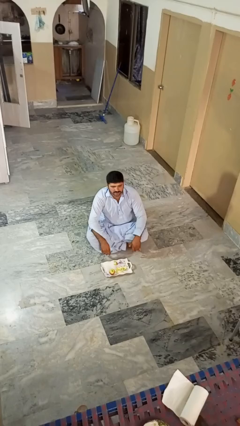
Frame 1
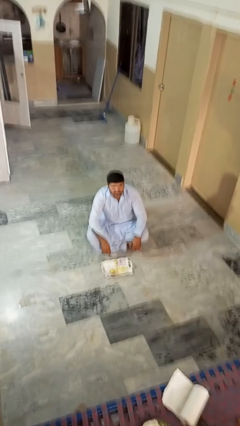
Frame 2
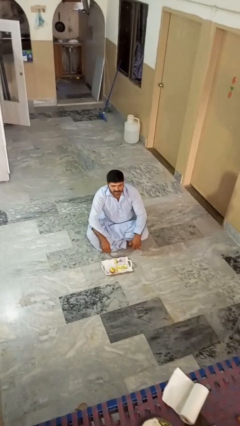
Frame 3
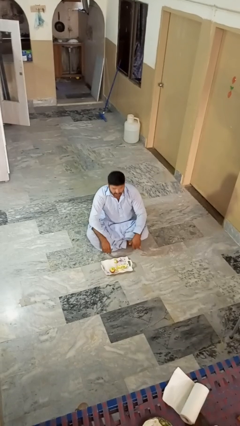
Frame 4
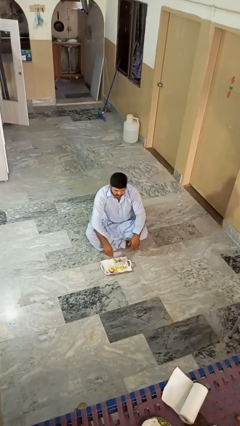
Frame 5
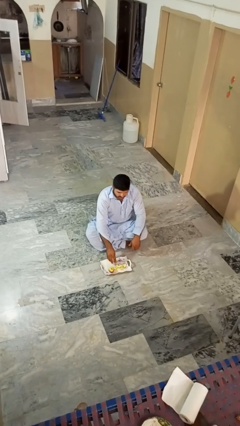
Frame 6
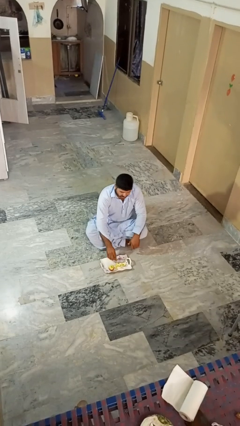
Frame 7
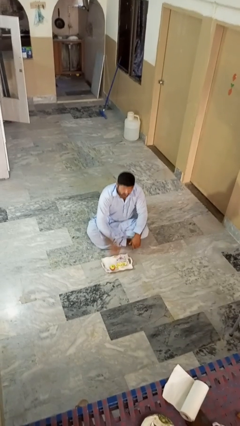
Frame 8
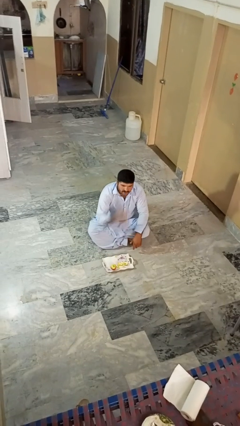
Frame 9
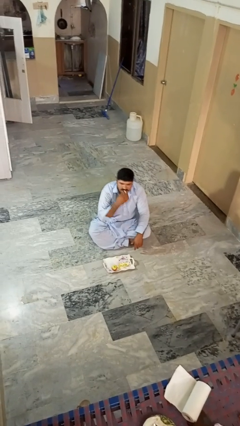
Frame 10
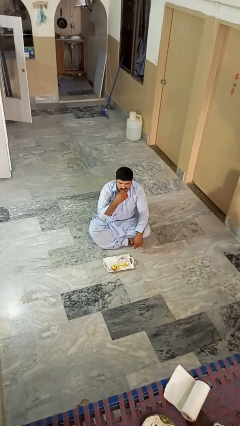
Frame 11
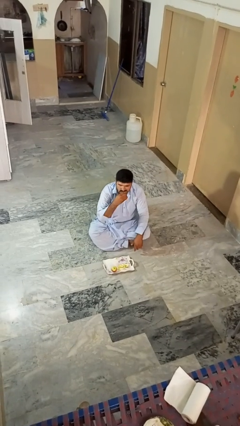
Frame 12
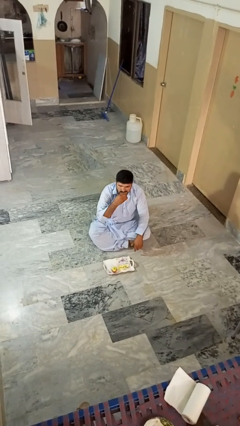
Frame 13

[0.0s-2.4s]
person eats apple

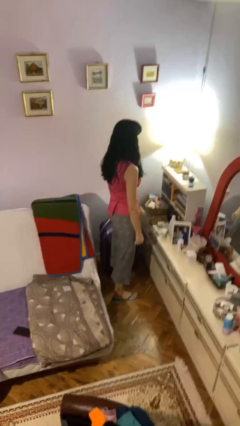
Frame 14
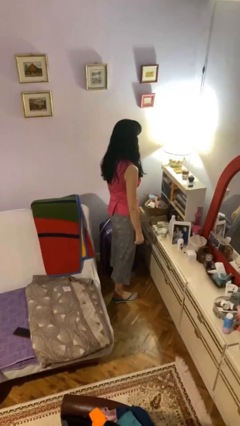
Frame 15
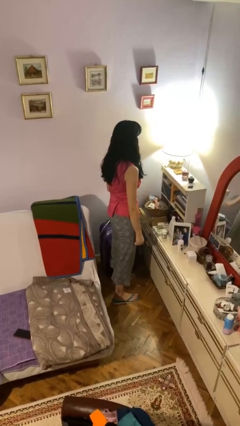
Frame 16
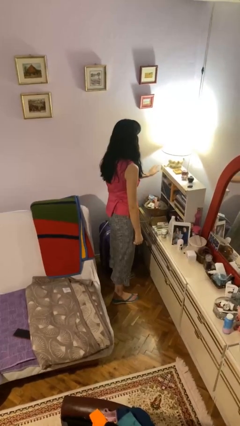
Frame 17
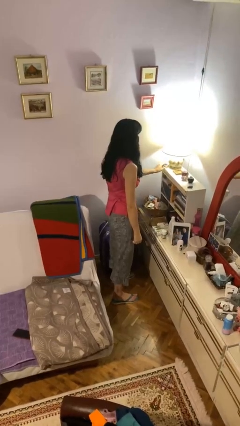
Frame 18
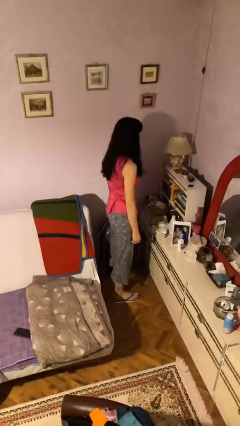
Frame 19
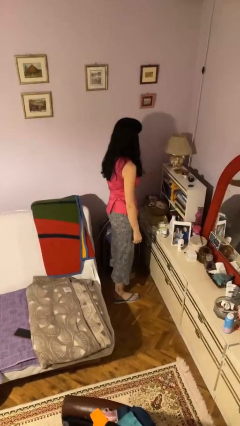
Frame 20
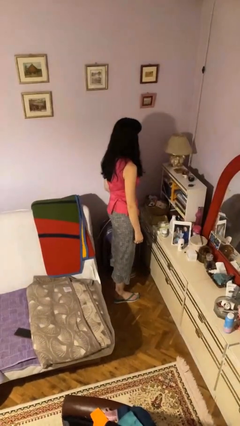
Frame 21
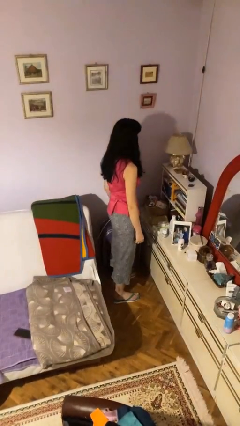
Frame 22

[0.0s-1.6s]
person turns off lamp

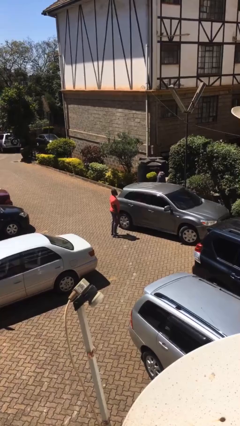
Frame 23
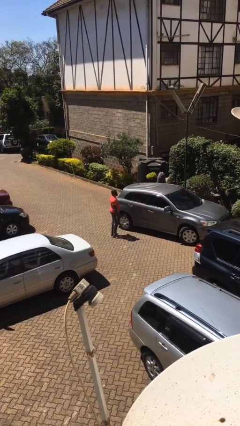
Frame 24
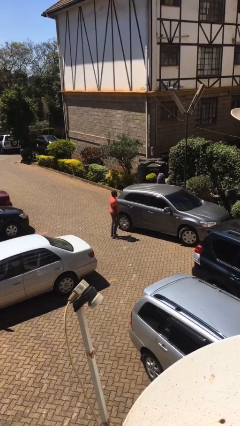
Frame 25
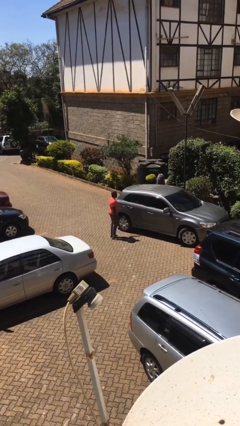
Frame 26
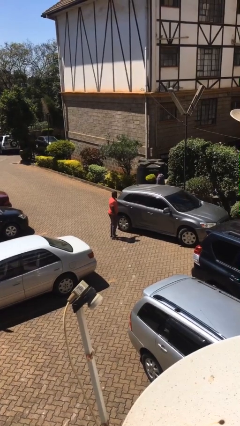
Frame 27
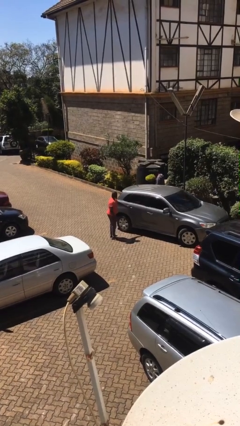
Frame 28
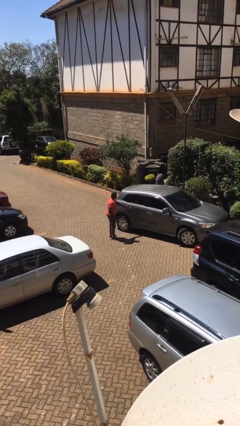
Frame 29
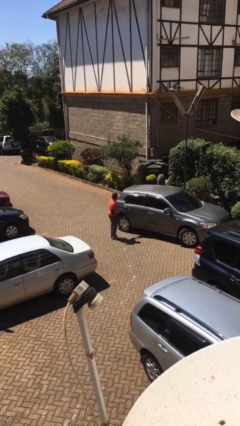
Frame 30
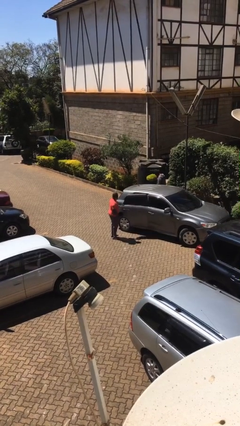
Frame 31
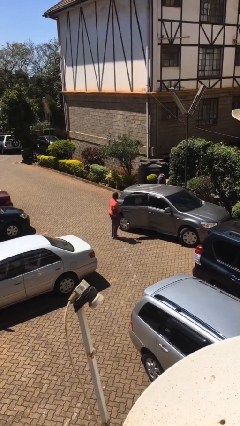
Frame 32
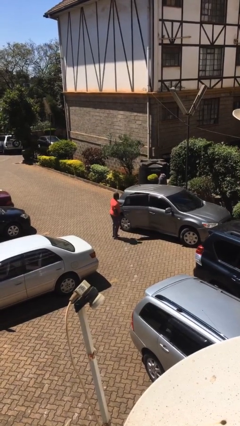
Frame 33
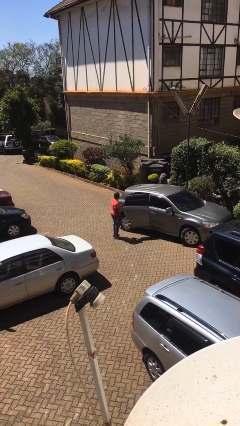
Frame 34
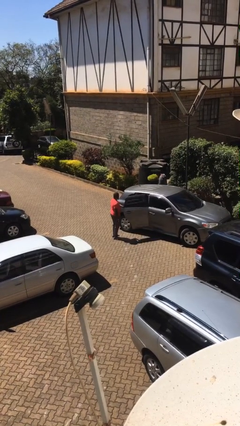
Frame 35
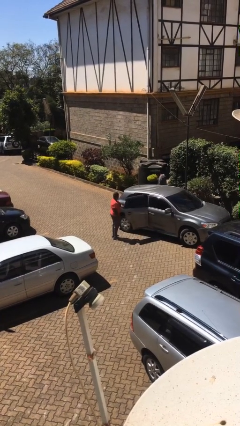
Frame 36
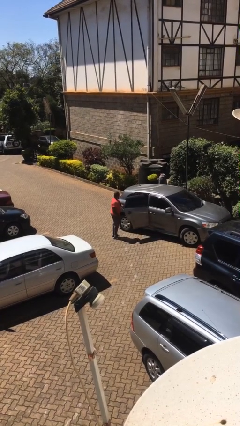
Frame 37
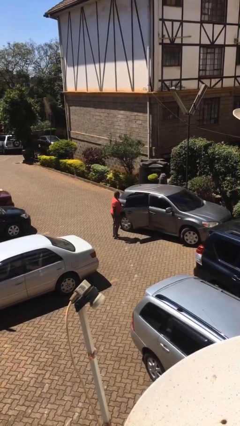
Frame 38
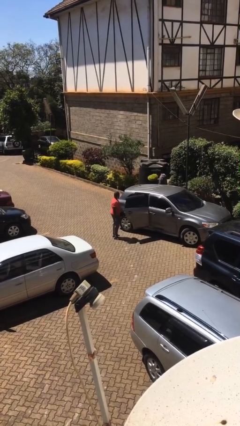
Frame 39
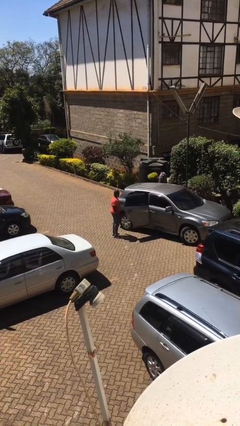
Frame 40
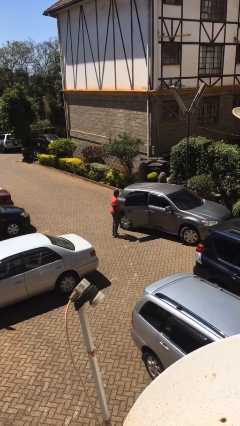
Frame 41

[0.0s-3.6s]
person opens car door

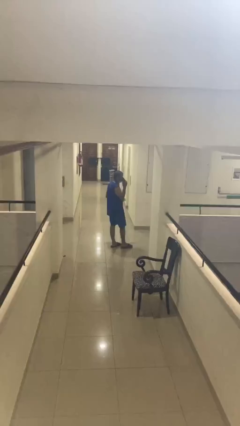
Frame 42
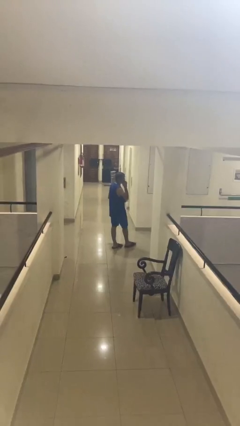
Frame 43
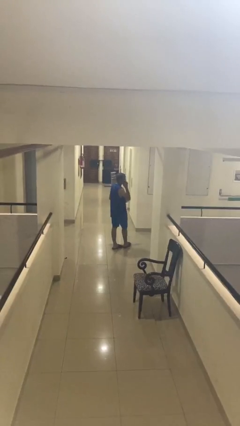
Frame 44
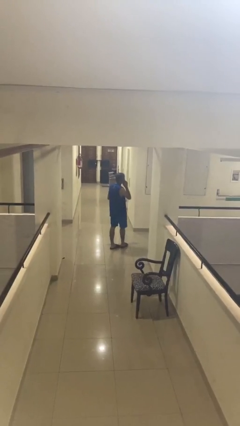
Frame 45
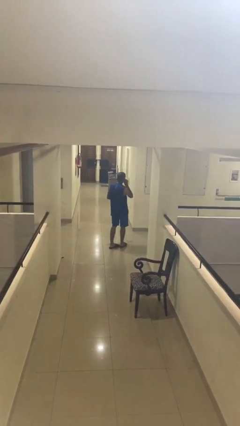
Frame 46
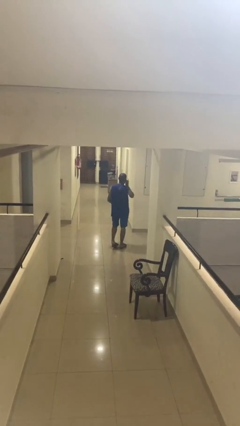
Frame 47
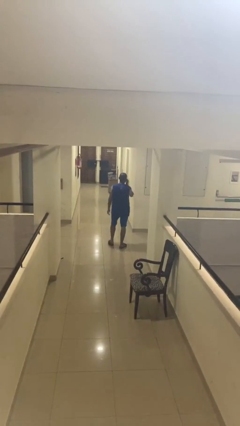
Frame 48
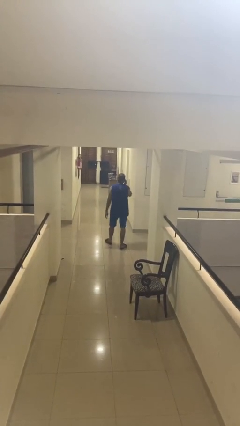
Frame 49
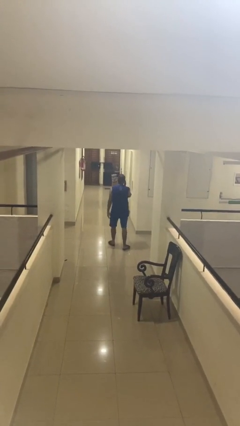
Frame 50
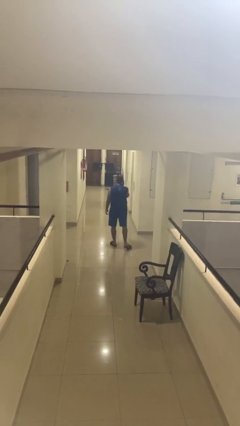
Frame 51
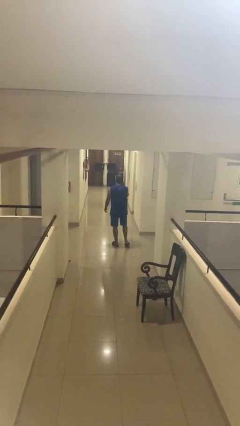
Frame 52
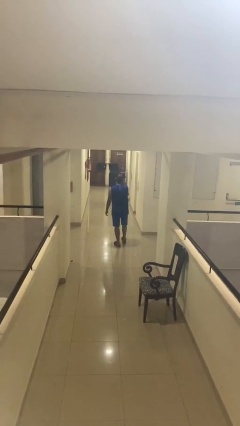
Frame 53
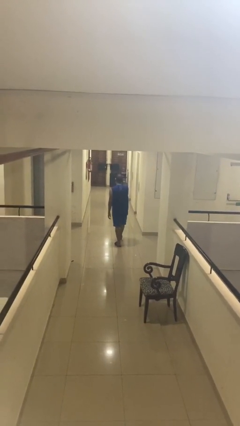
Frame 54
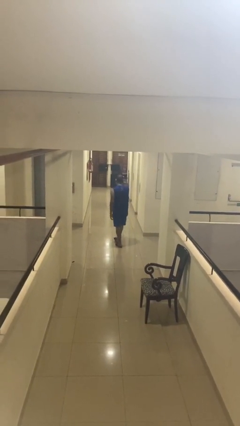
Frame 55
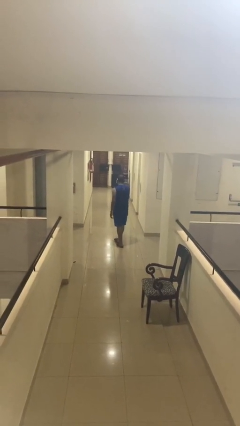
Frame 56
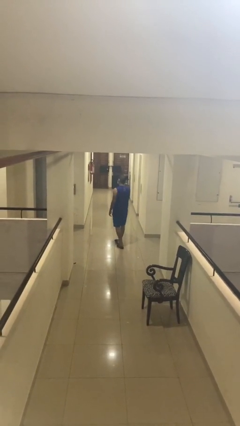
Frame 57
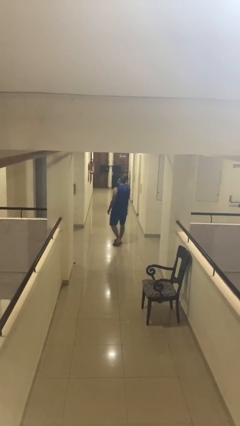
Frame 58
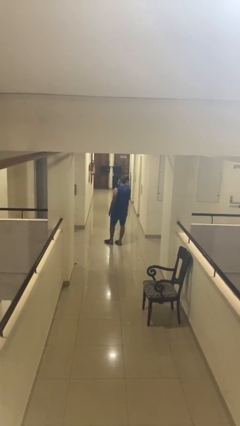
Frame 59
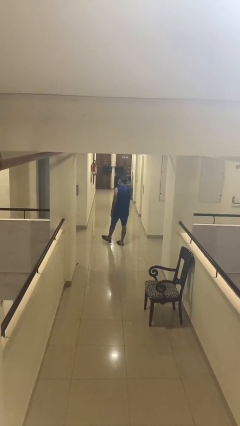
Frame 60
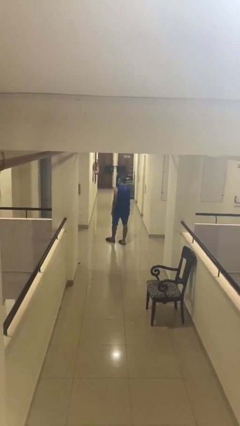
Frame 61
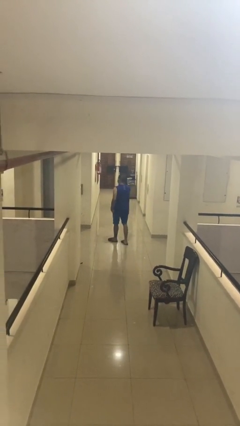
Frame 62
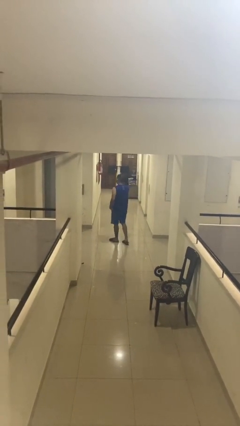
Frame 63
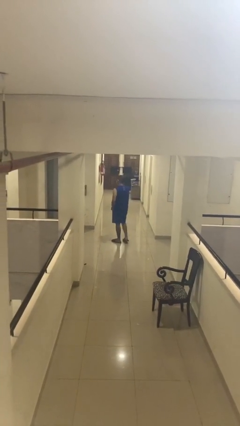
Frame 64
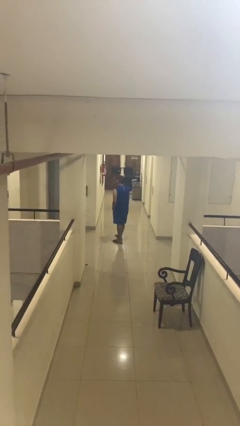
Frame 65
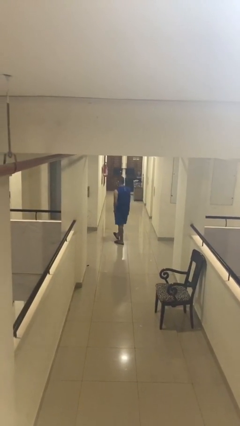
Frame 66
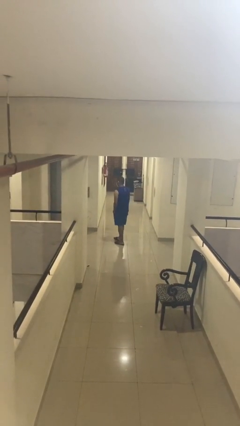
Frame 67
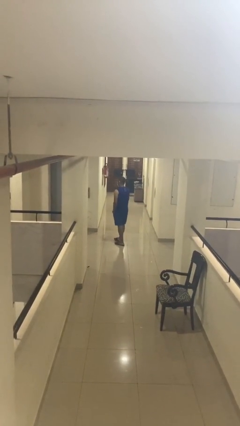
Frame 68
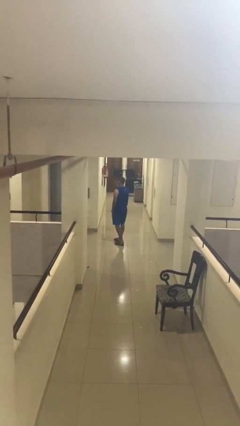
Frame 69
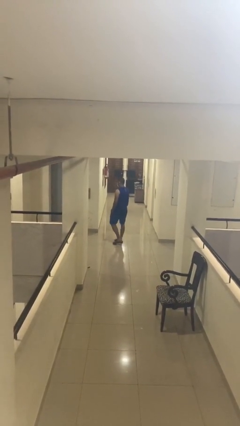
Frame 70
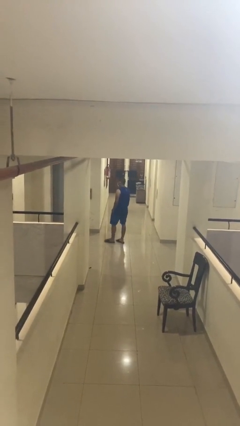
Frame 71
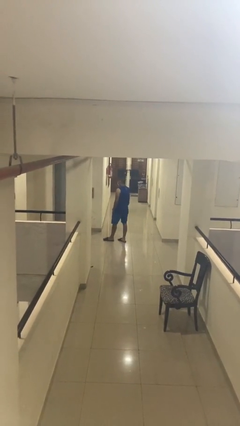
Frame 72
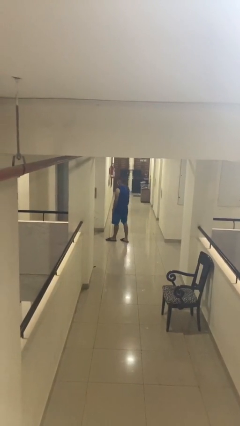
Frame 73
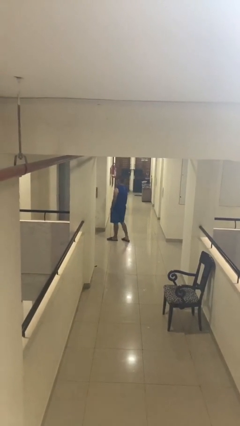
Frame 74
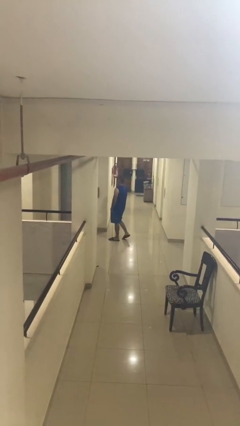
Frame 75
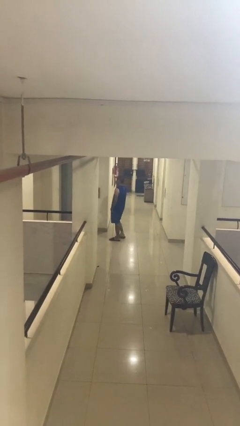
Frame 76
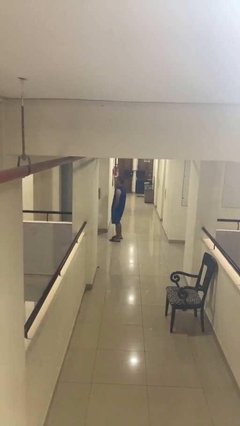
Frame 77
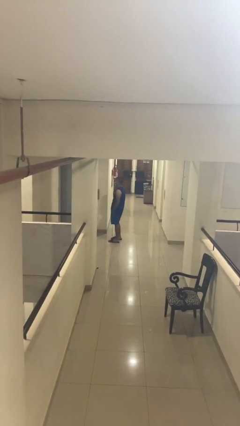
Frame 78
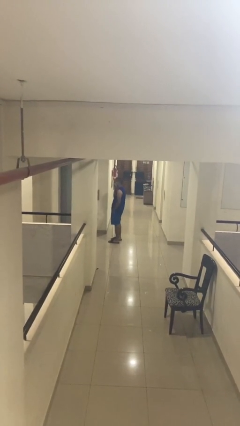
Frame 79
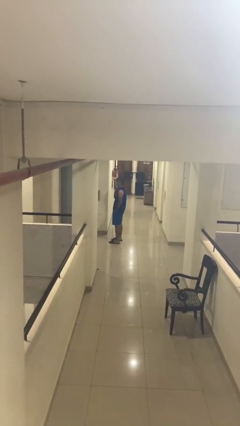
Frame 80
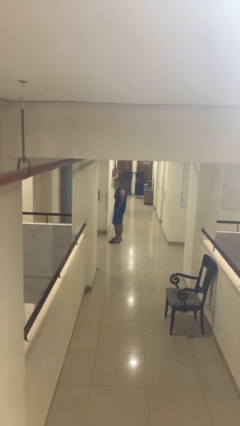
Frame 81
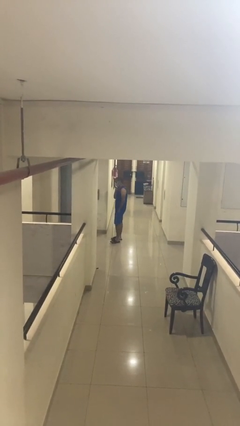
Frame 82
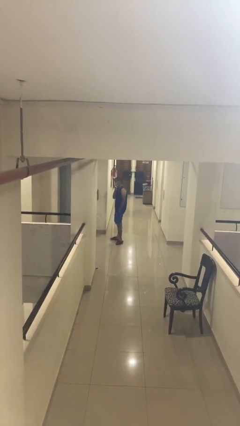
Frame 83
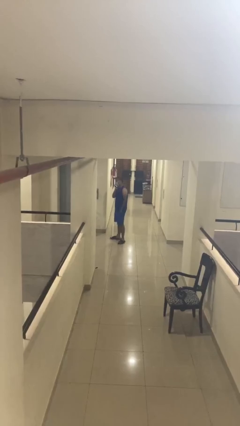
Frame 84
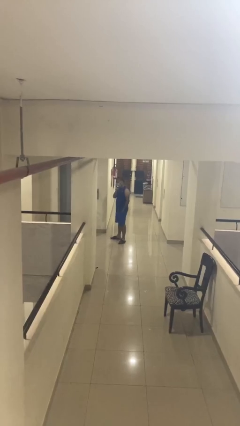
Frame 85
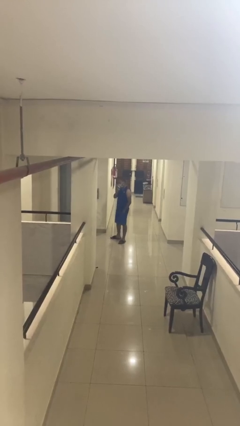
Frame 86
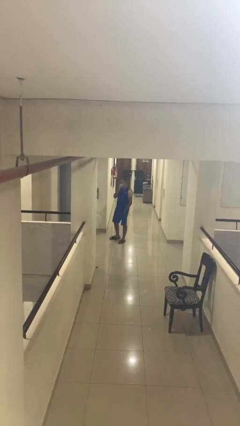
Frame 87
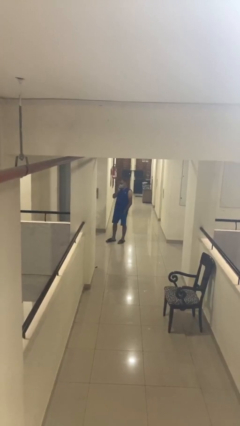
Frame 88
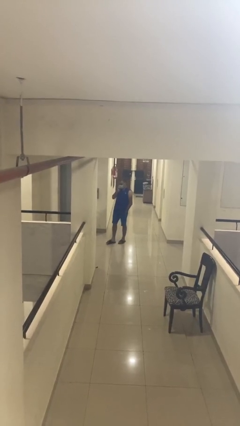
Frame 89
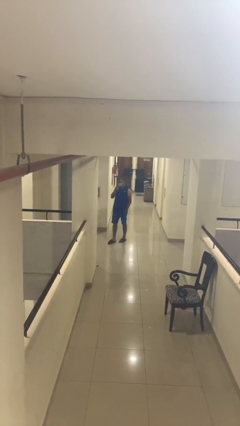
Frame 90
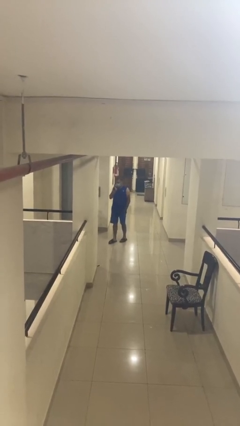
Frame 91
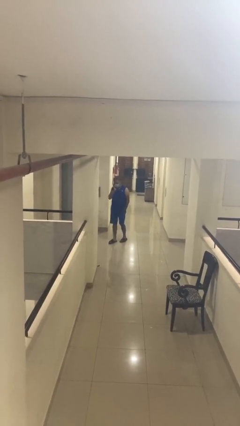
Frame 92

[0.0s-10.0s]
person talks on phone
